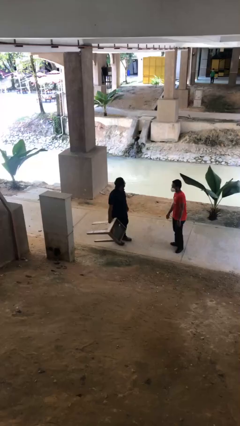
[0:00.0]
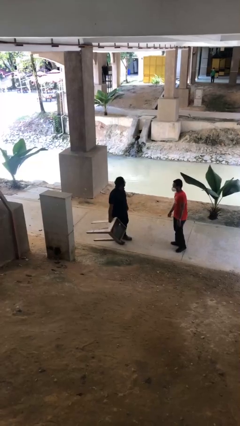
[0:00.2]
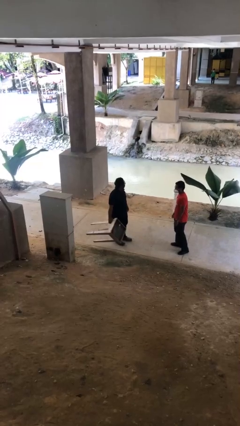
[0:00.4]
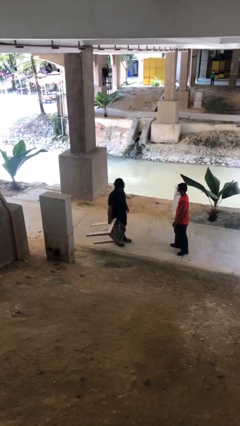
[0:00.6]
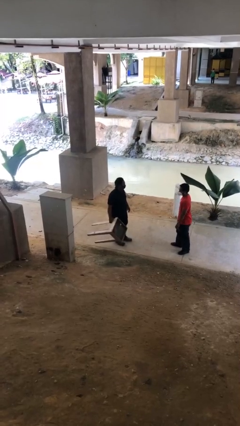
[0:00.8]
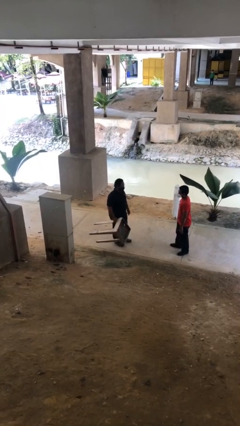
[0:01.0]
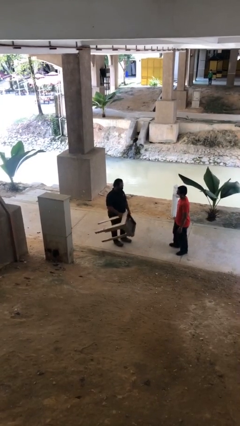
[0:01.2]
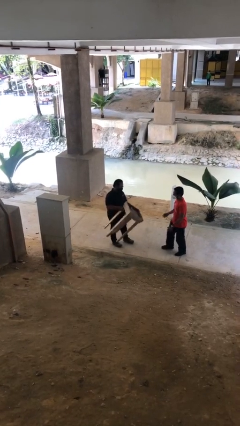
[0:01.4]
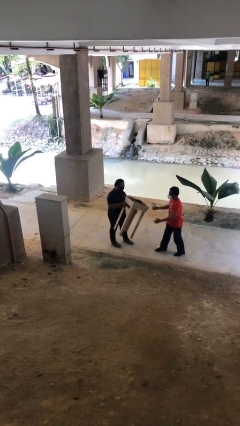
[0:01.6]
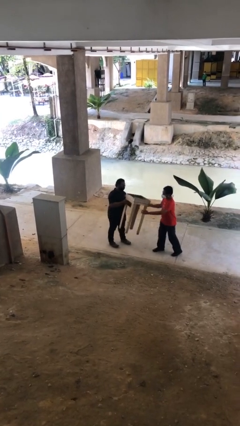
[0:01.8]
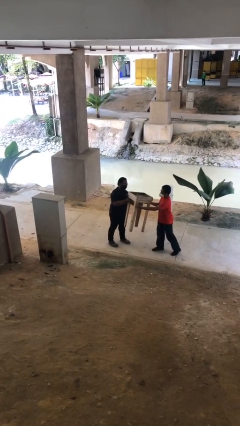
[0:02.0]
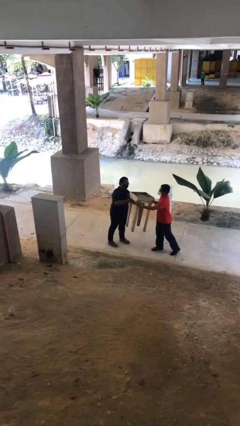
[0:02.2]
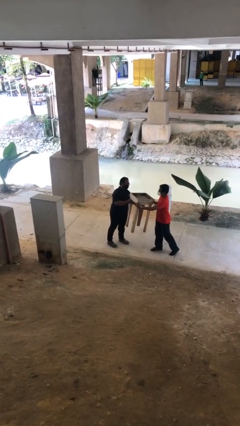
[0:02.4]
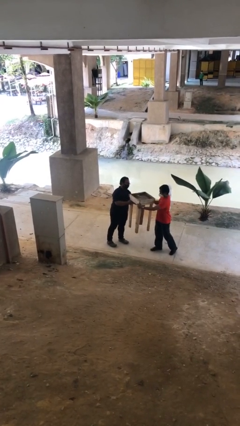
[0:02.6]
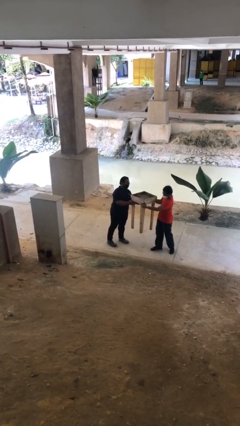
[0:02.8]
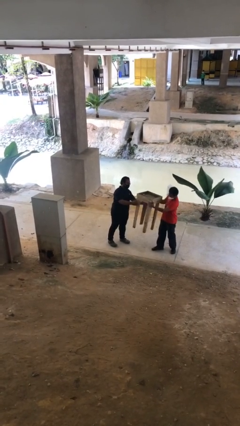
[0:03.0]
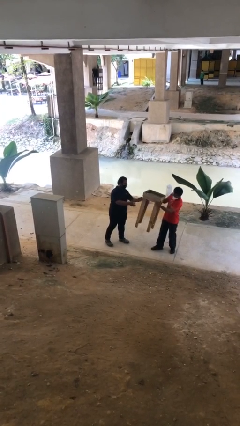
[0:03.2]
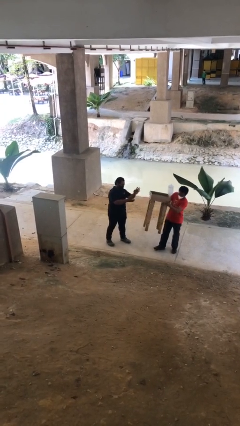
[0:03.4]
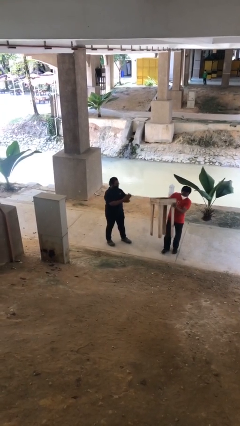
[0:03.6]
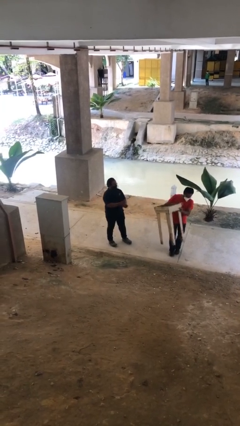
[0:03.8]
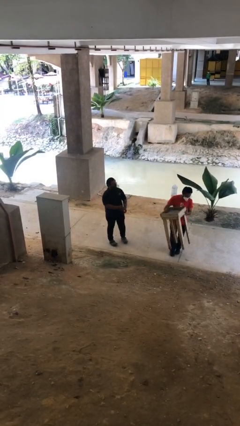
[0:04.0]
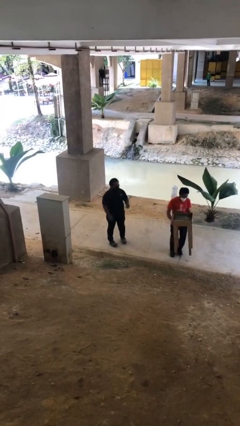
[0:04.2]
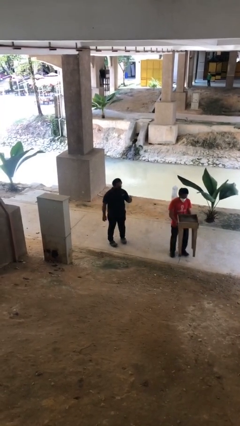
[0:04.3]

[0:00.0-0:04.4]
person transfers object to person

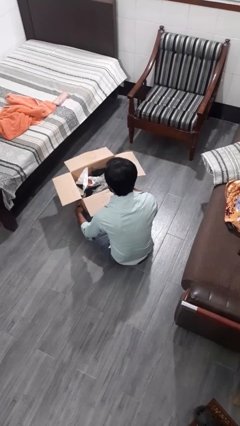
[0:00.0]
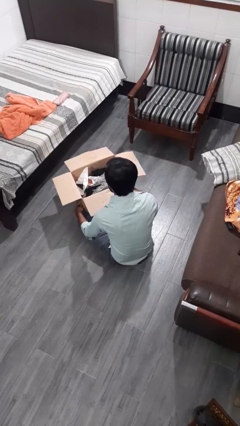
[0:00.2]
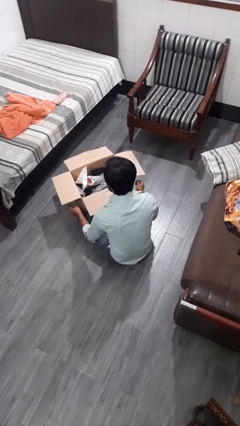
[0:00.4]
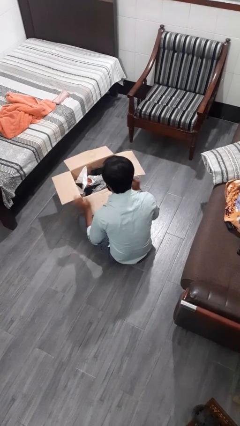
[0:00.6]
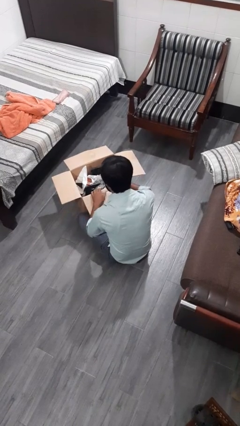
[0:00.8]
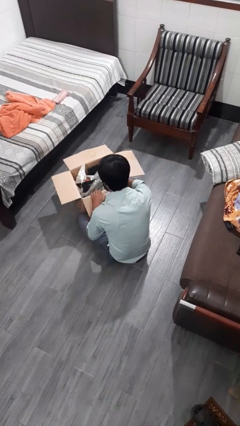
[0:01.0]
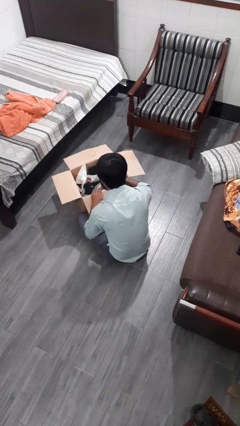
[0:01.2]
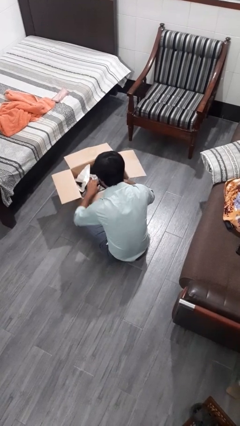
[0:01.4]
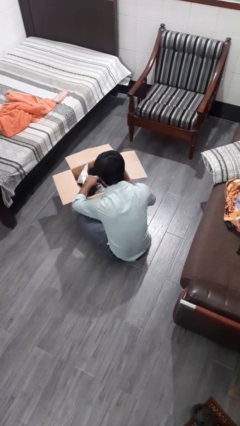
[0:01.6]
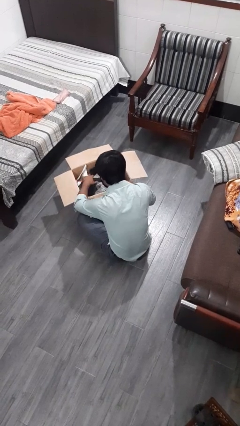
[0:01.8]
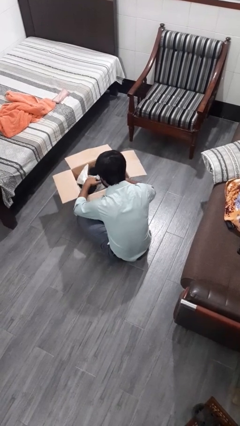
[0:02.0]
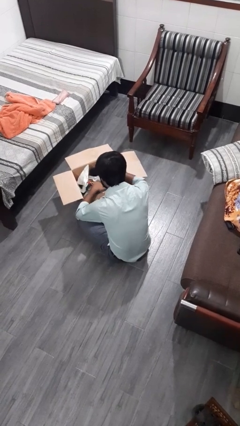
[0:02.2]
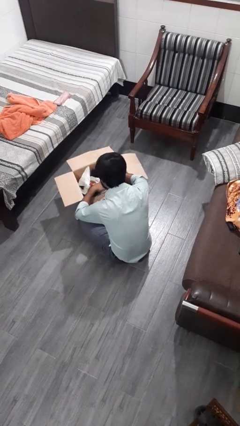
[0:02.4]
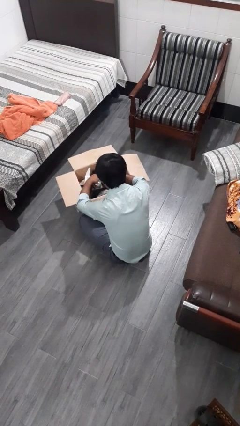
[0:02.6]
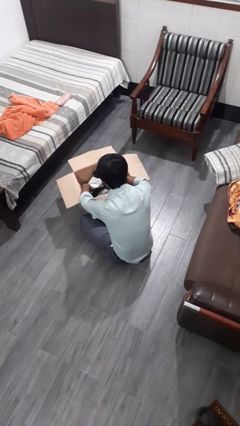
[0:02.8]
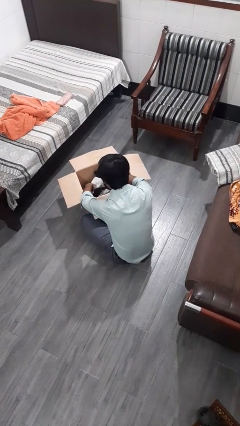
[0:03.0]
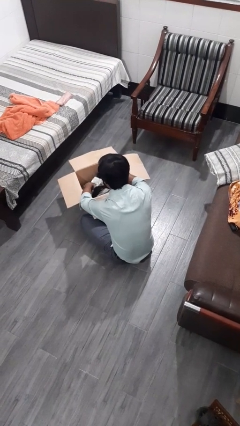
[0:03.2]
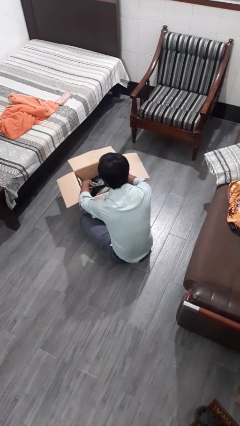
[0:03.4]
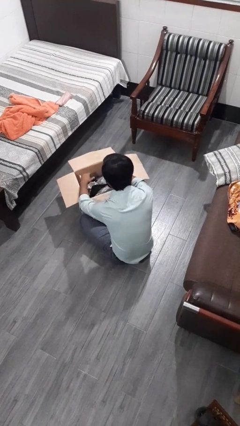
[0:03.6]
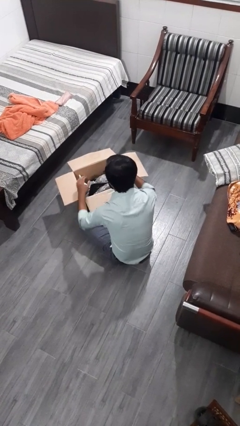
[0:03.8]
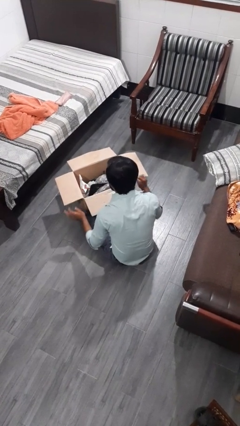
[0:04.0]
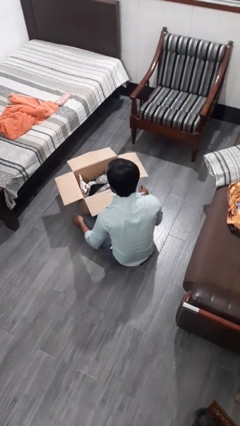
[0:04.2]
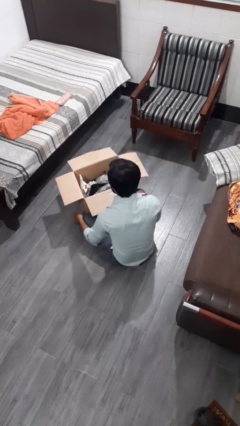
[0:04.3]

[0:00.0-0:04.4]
person searches in box

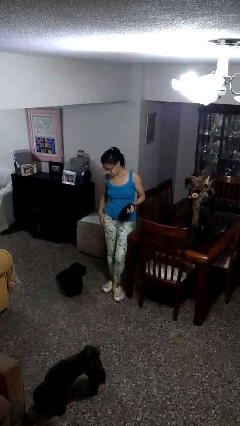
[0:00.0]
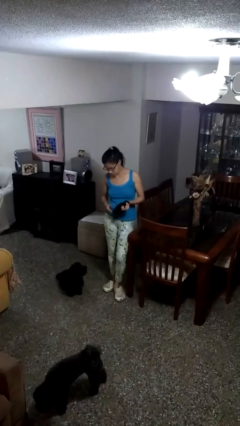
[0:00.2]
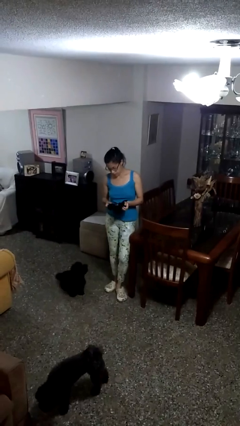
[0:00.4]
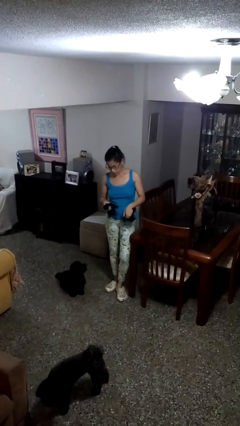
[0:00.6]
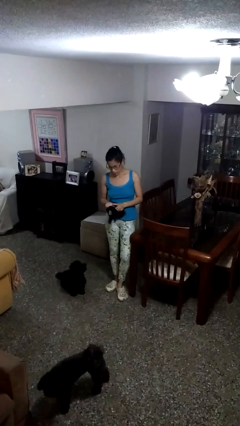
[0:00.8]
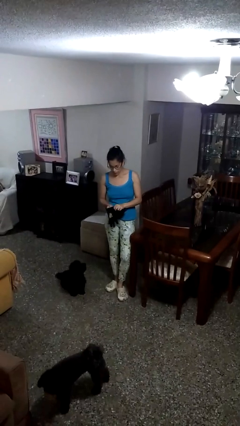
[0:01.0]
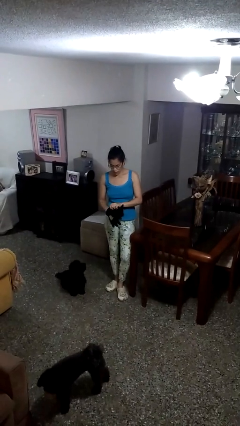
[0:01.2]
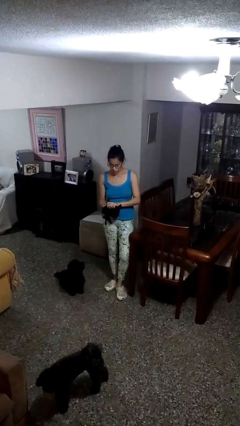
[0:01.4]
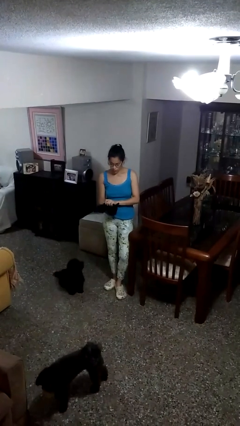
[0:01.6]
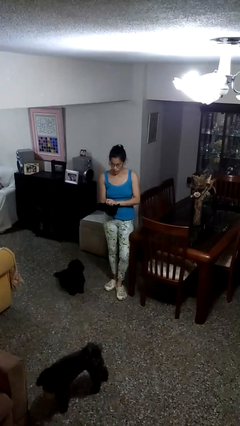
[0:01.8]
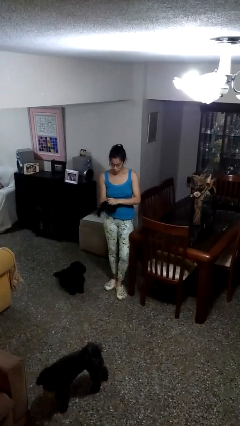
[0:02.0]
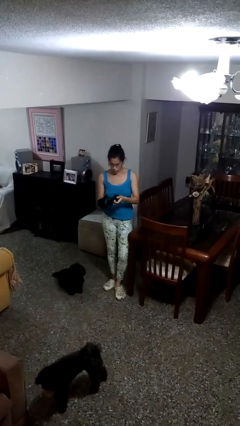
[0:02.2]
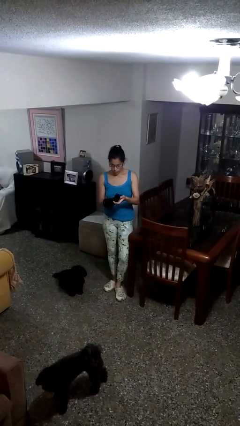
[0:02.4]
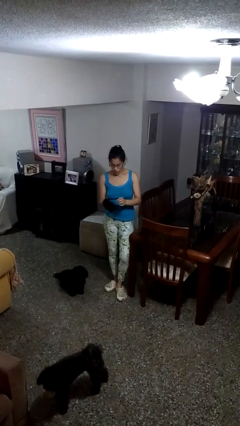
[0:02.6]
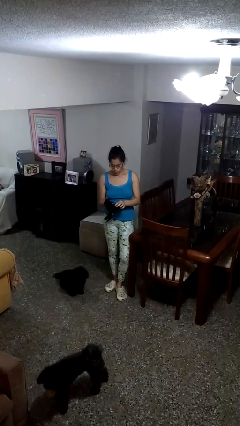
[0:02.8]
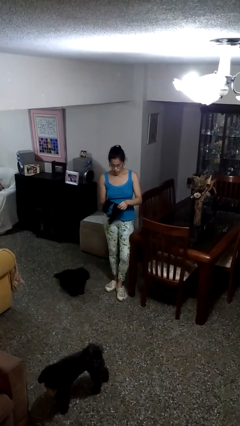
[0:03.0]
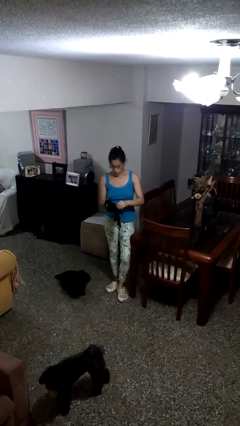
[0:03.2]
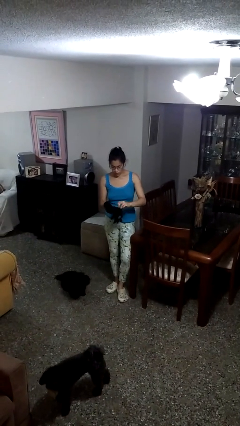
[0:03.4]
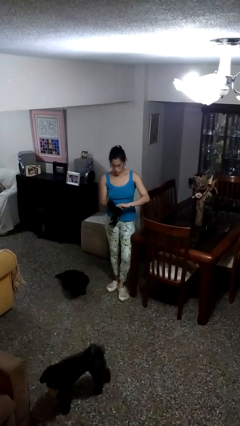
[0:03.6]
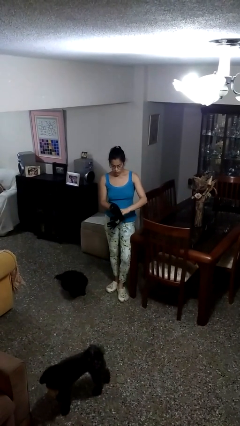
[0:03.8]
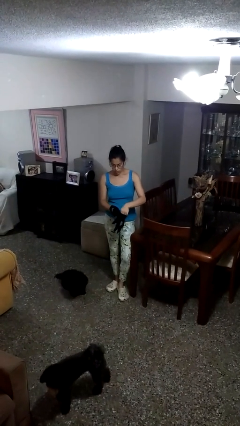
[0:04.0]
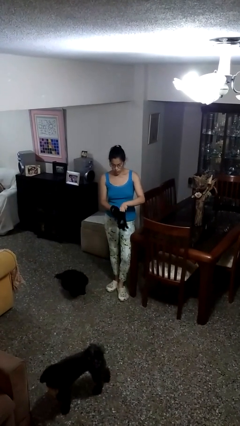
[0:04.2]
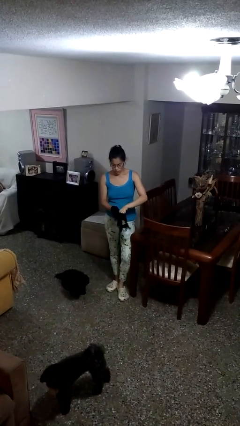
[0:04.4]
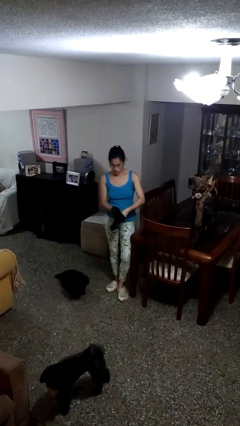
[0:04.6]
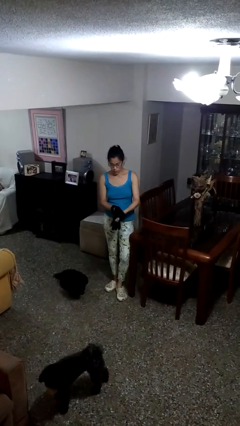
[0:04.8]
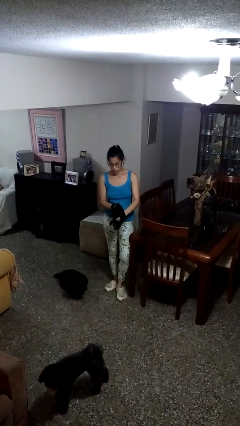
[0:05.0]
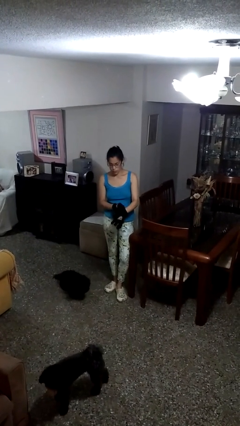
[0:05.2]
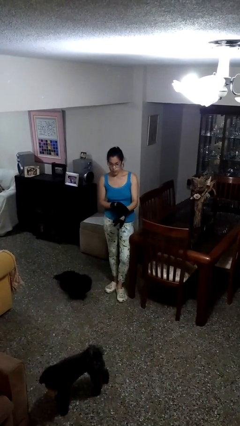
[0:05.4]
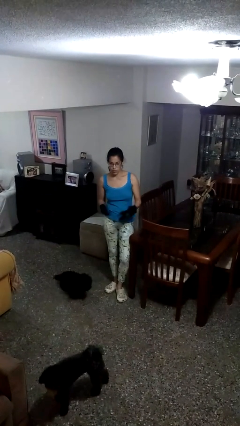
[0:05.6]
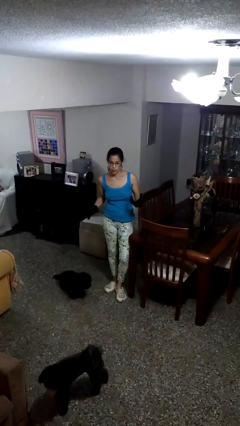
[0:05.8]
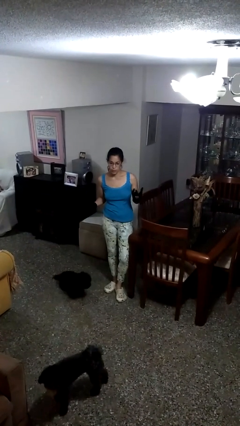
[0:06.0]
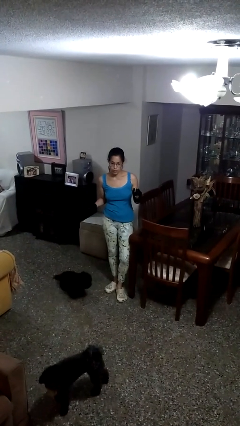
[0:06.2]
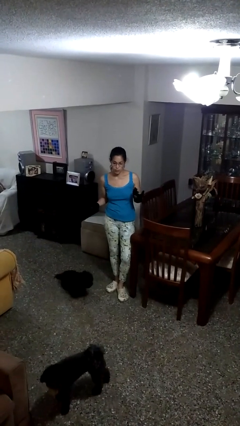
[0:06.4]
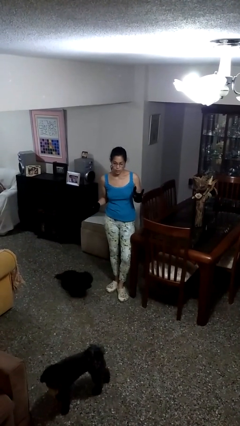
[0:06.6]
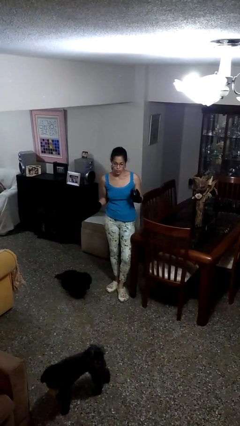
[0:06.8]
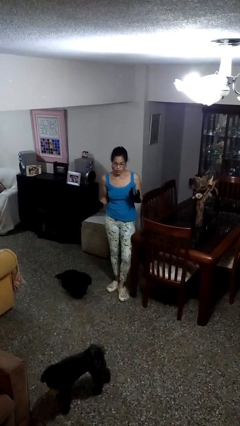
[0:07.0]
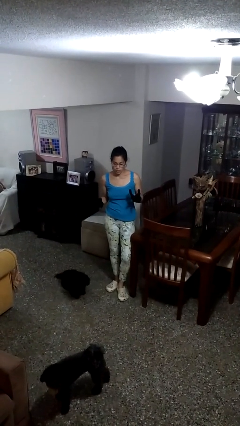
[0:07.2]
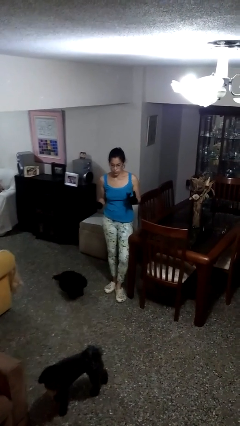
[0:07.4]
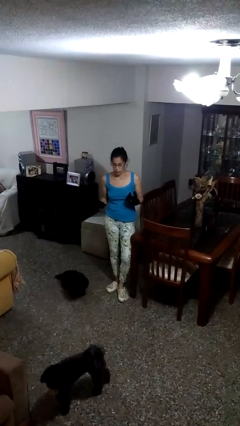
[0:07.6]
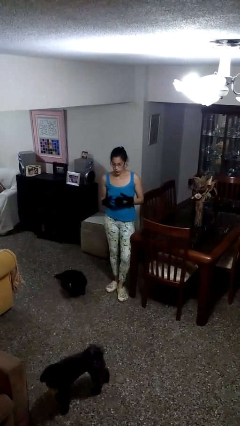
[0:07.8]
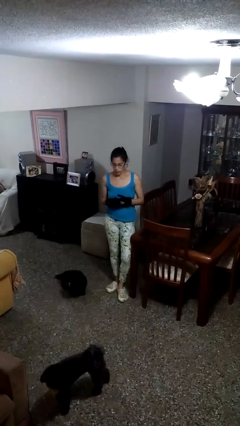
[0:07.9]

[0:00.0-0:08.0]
person puts on gloves

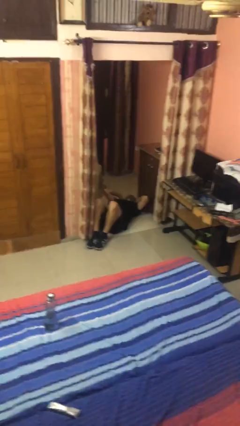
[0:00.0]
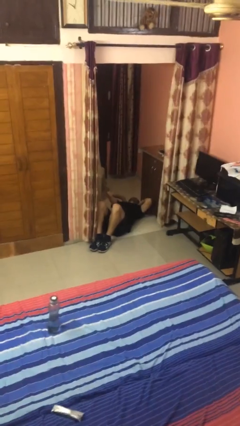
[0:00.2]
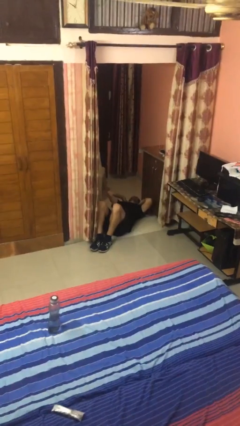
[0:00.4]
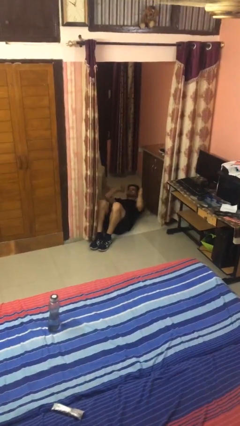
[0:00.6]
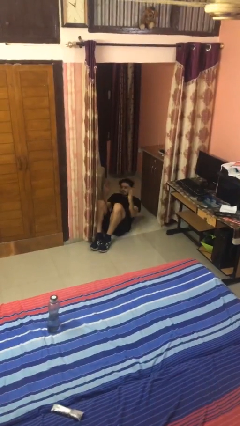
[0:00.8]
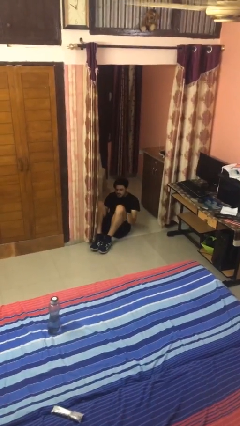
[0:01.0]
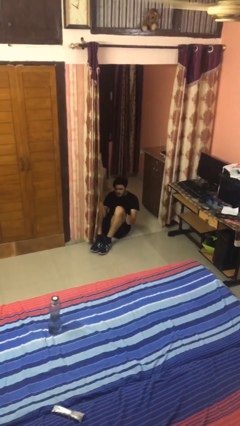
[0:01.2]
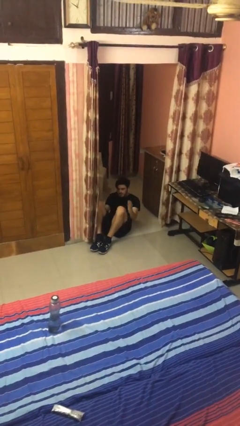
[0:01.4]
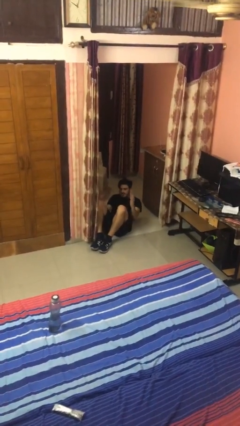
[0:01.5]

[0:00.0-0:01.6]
person exercises with situp
